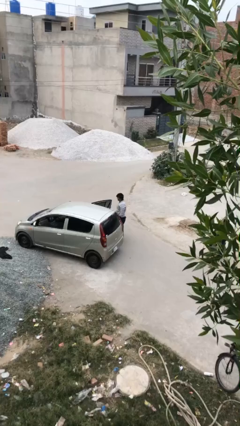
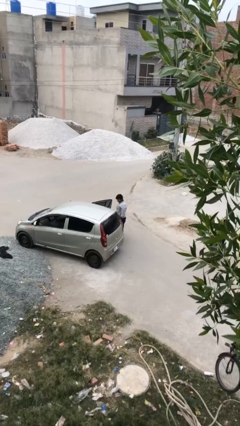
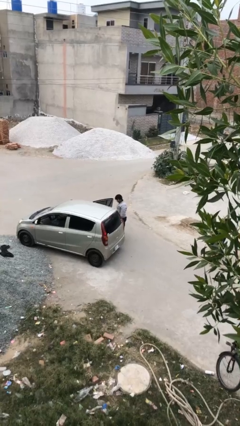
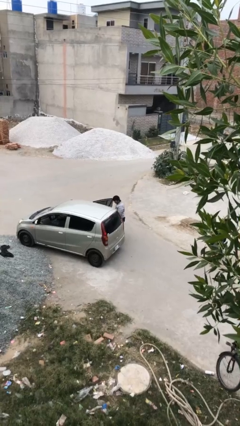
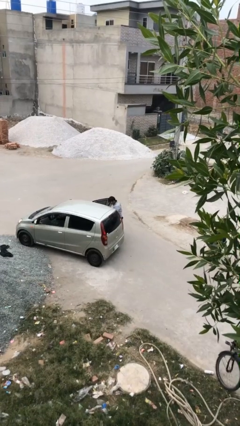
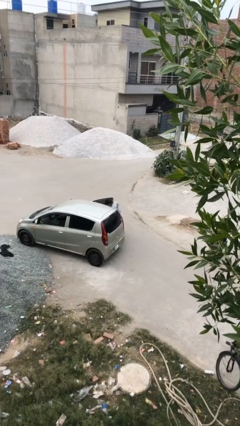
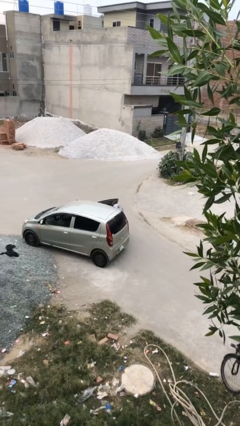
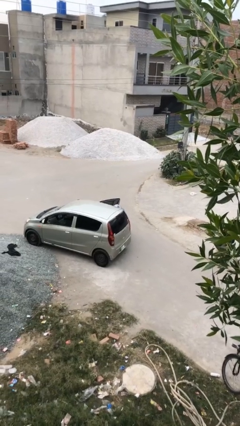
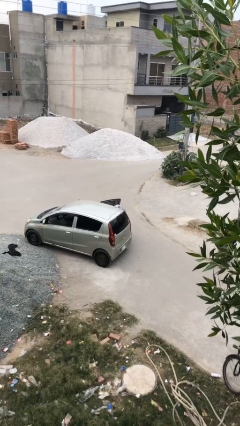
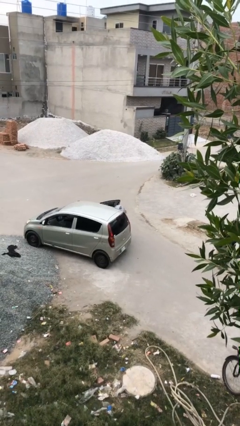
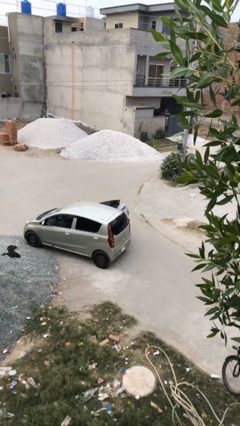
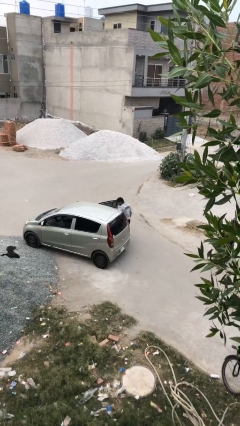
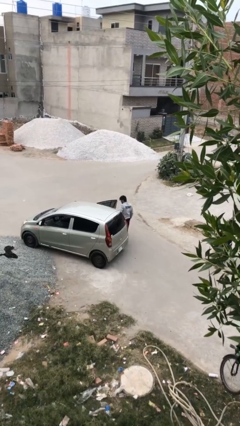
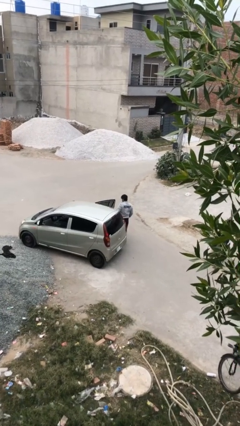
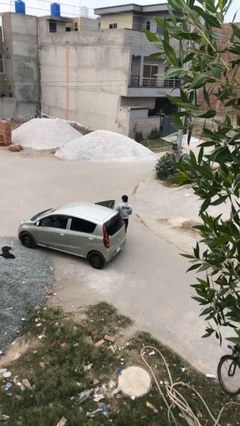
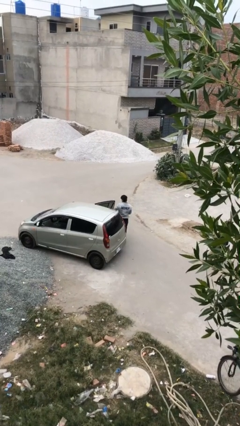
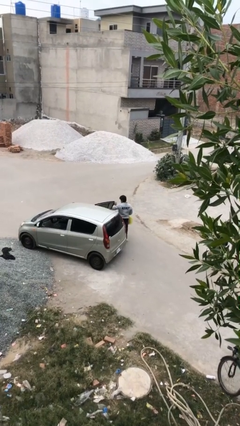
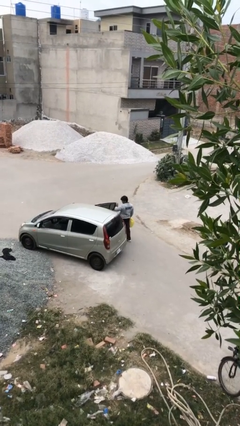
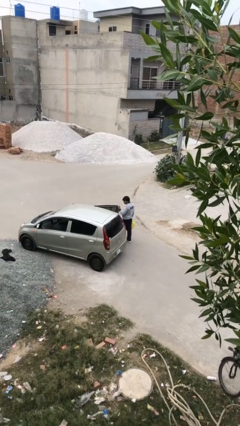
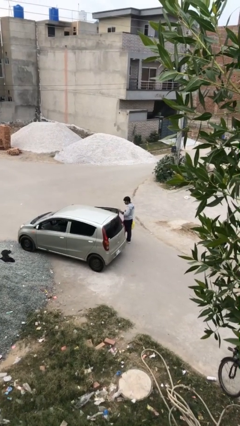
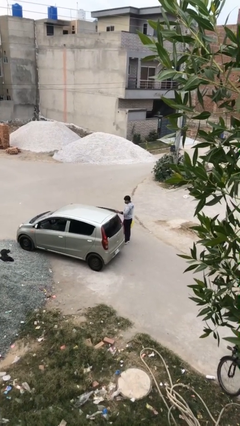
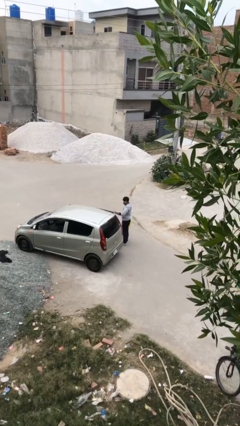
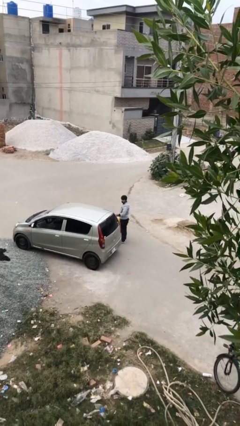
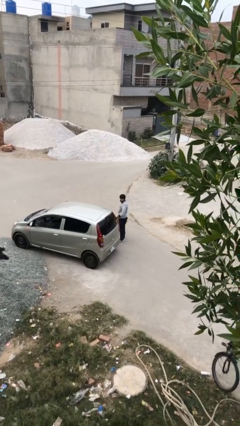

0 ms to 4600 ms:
person unloads car

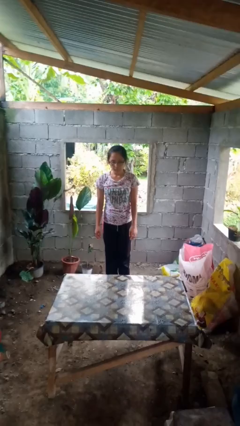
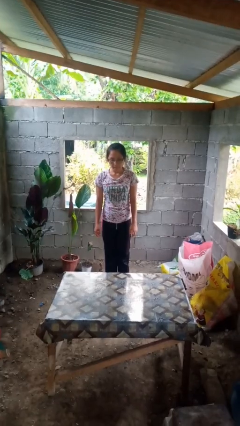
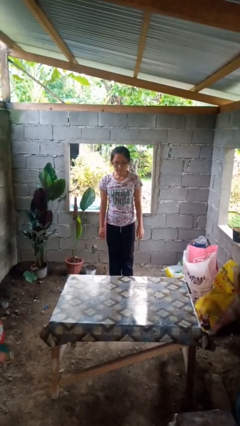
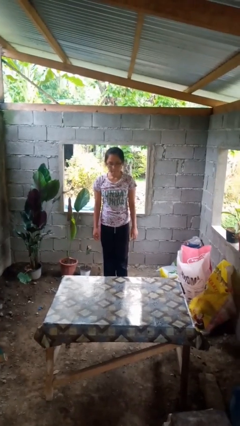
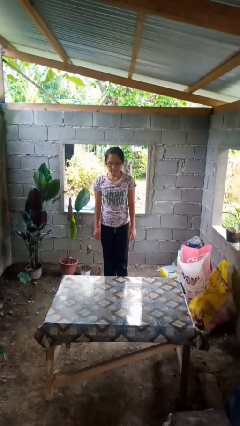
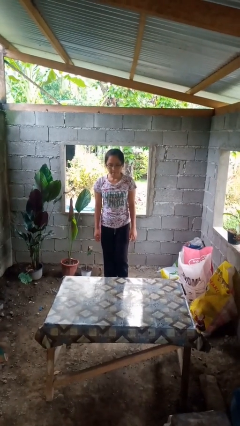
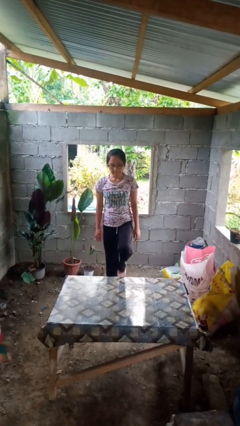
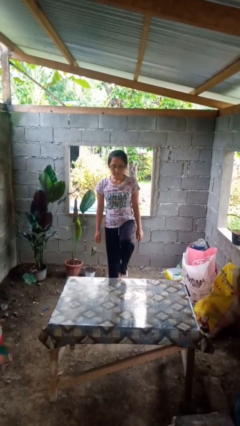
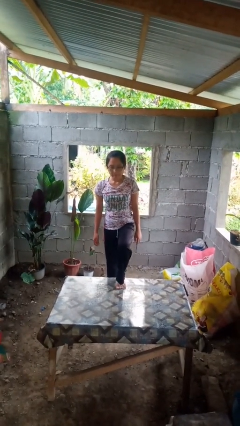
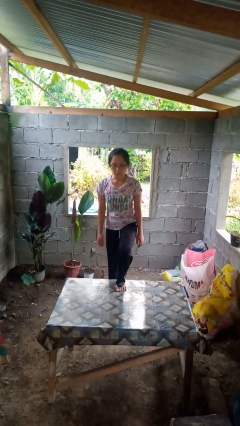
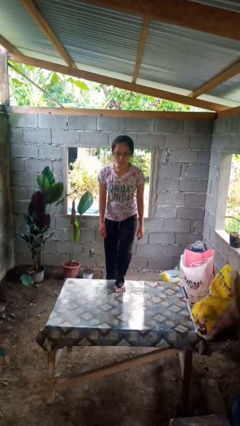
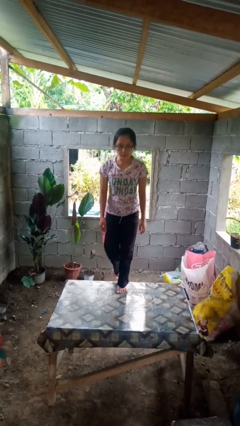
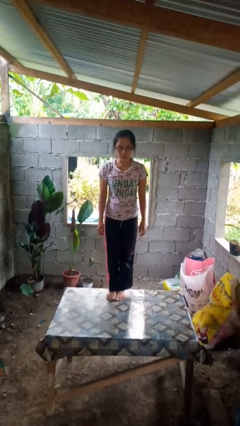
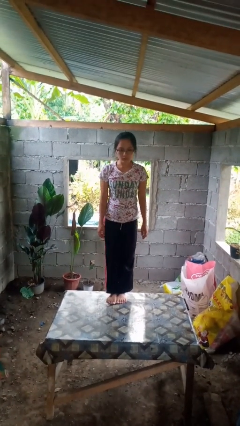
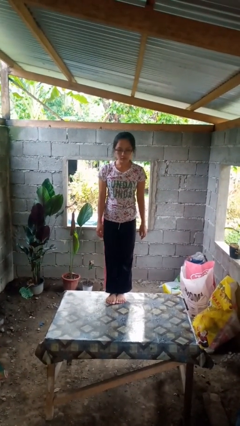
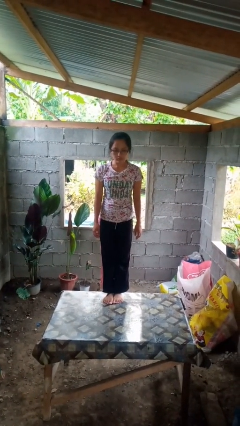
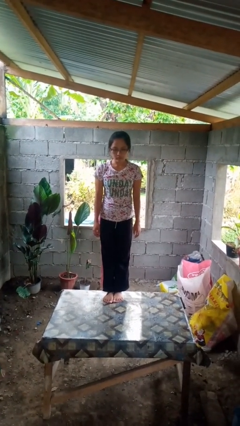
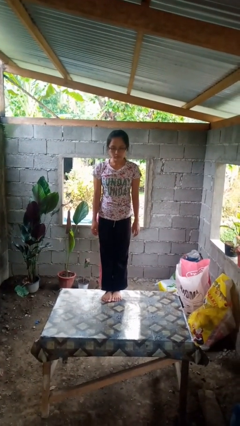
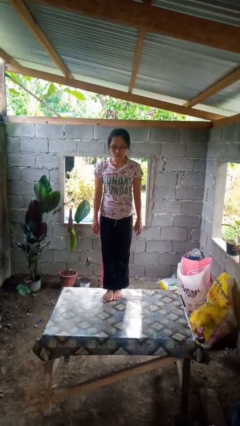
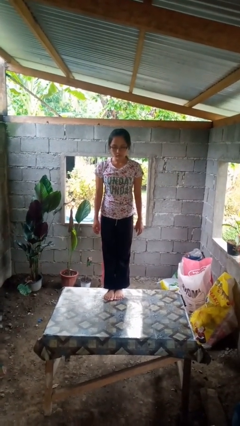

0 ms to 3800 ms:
person climbs on table

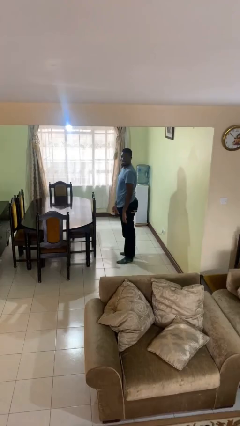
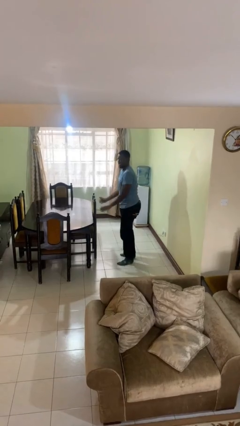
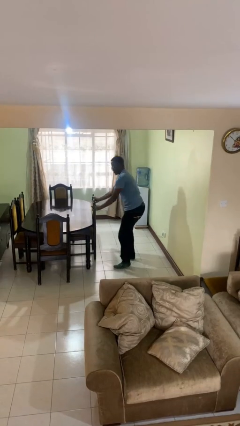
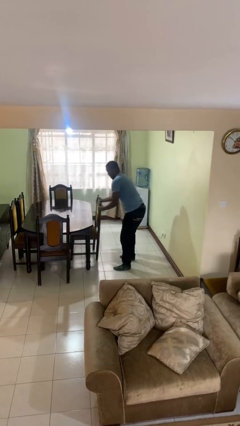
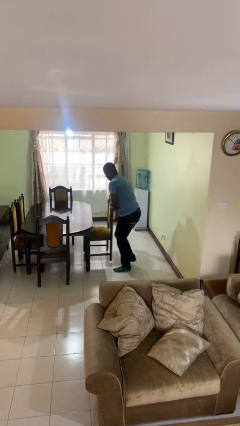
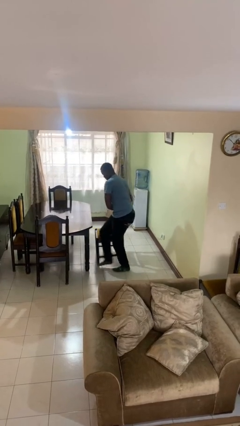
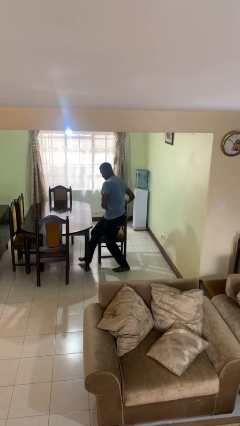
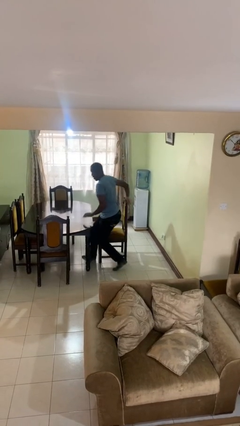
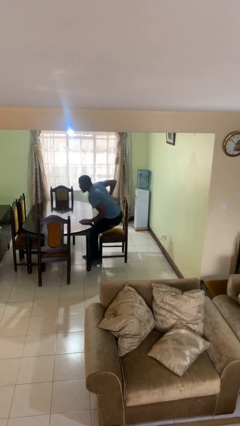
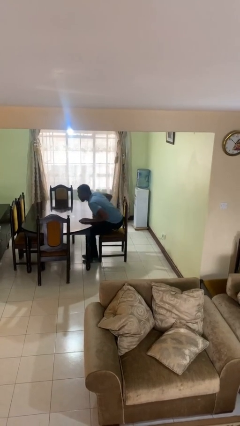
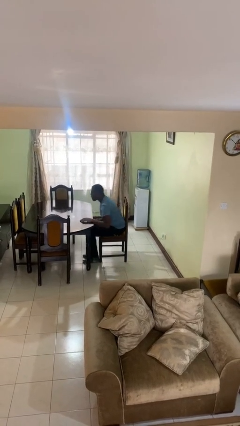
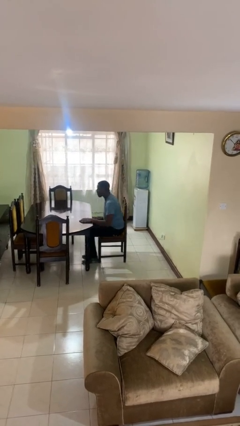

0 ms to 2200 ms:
person sits down

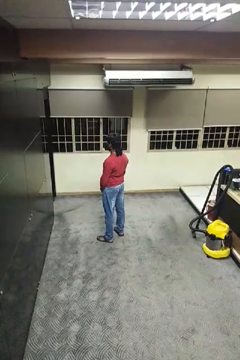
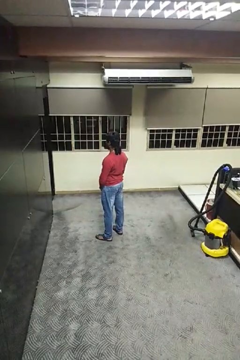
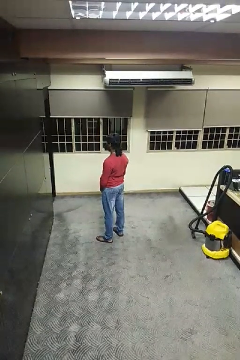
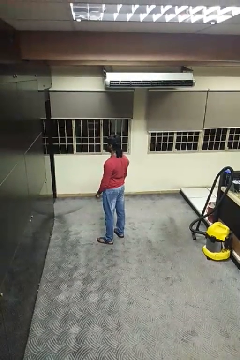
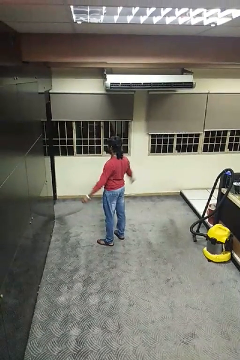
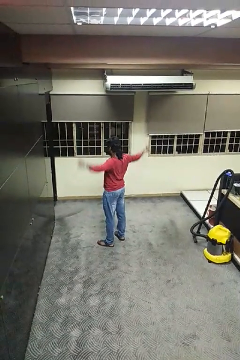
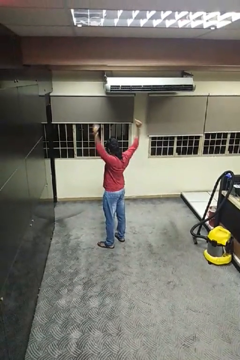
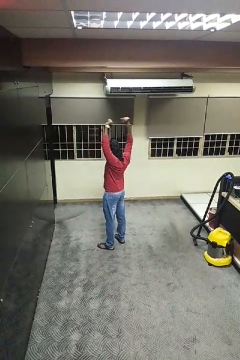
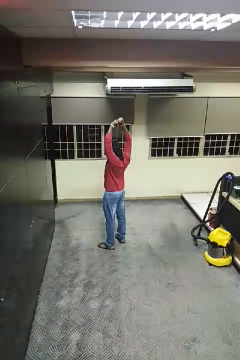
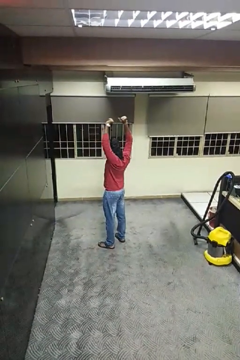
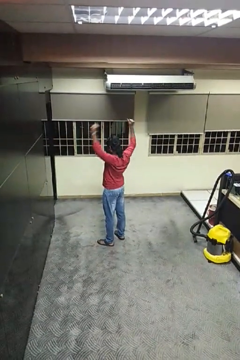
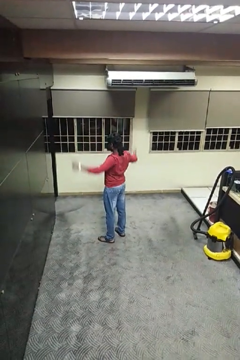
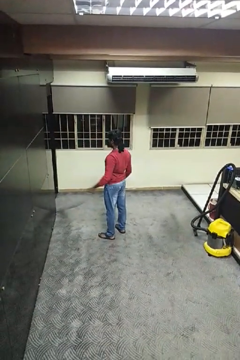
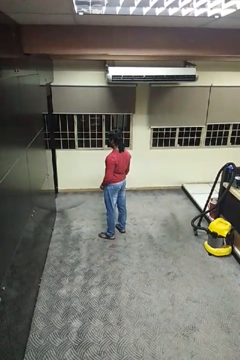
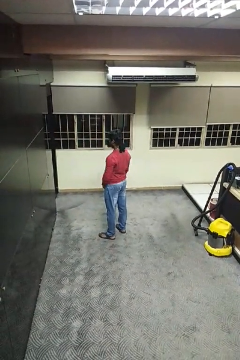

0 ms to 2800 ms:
person stretches arms over head

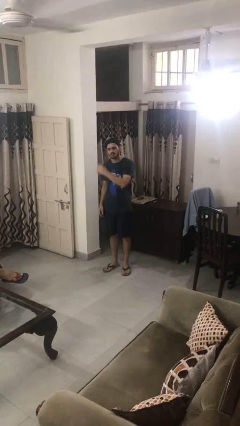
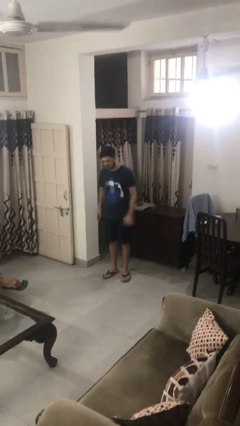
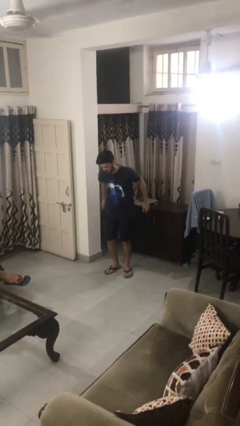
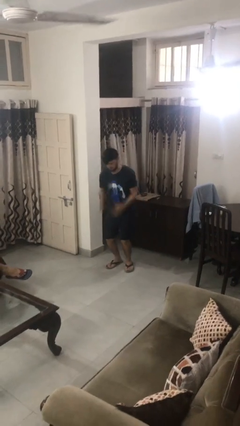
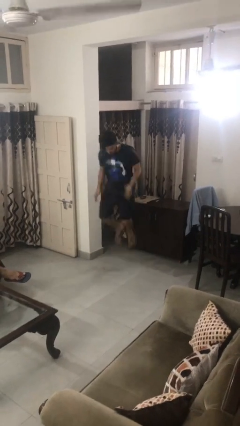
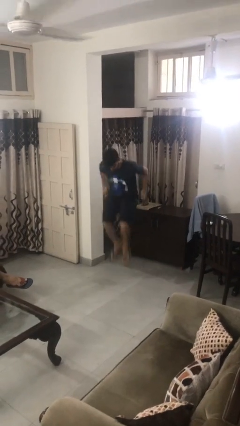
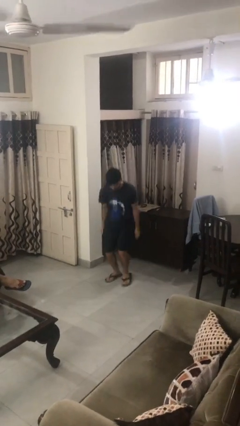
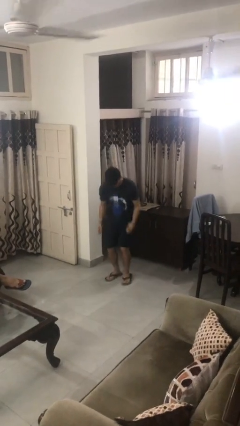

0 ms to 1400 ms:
person jumps

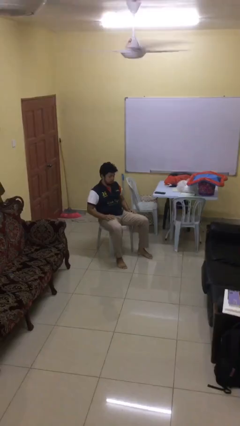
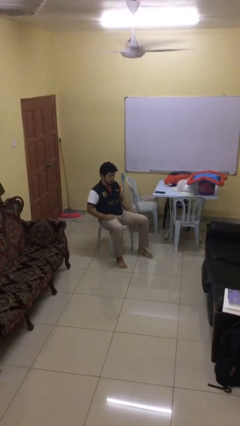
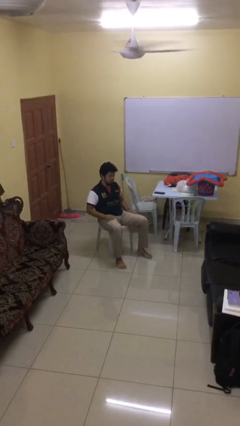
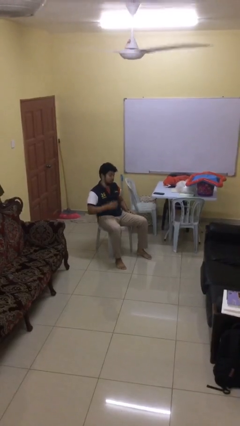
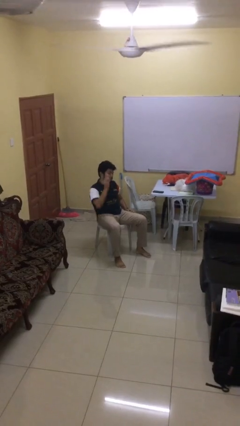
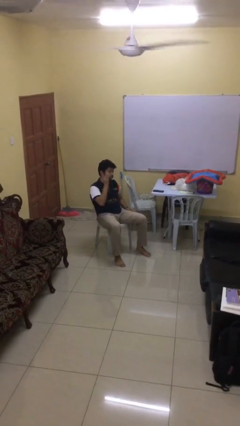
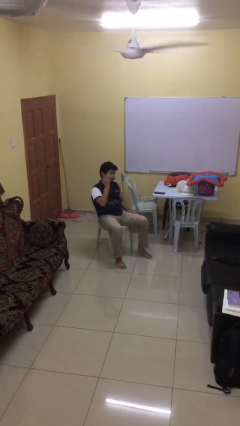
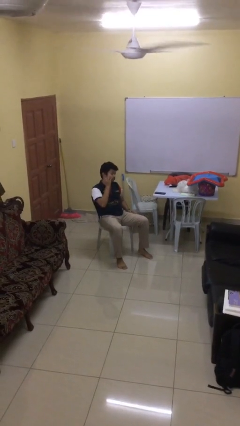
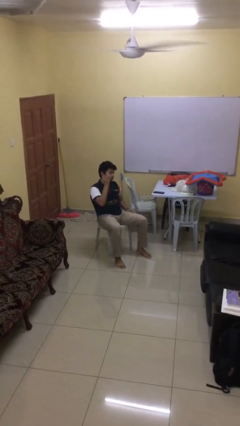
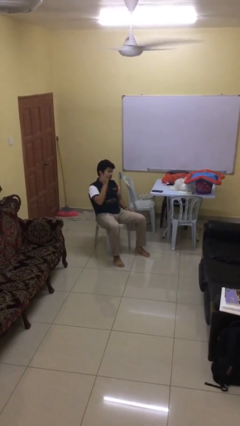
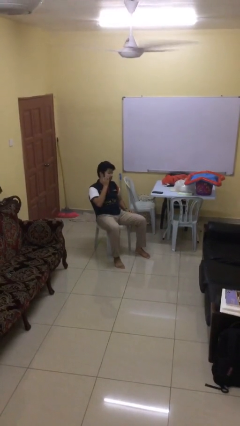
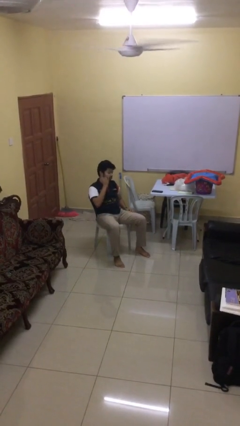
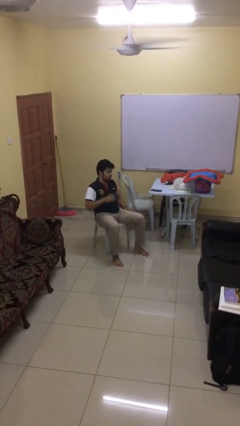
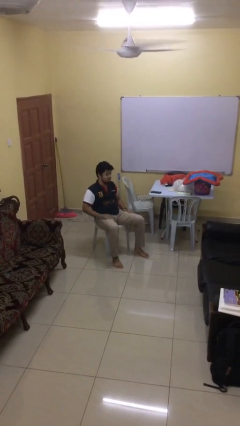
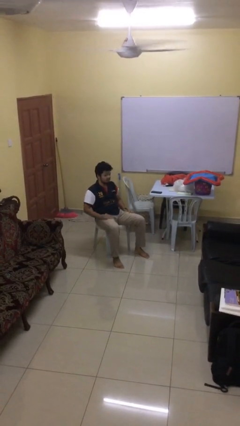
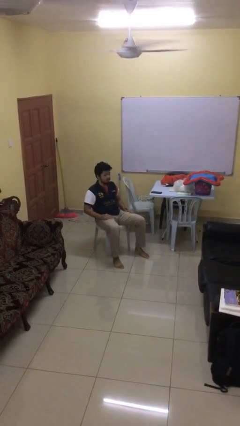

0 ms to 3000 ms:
person scratches face
